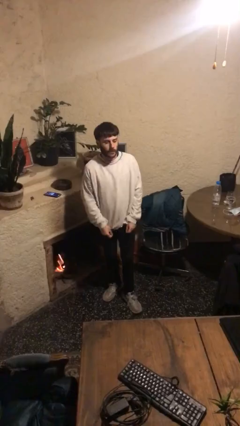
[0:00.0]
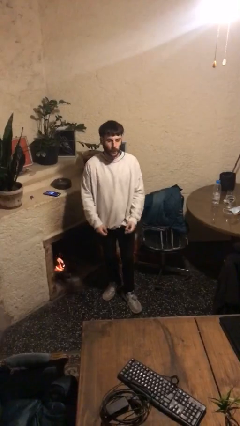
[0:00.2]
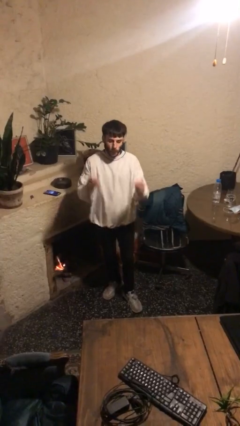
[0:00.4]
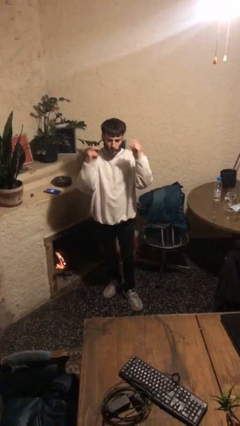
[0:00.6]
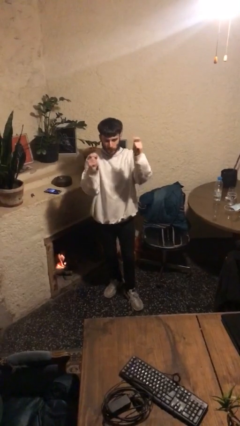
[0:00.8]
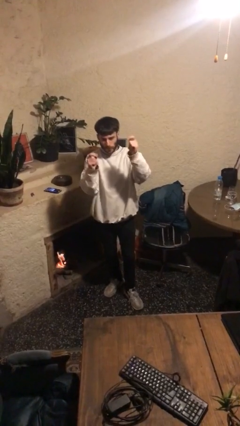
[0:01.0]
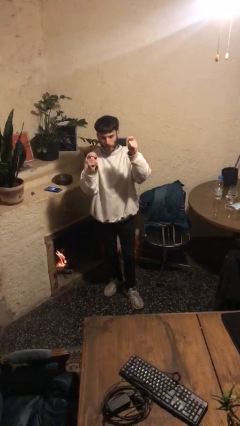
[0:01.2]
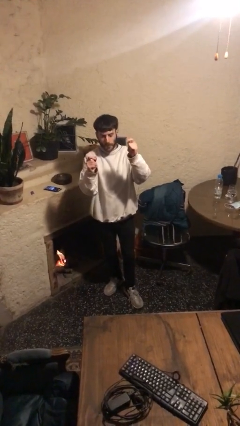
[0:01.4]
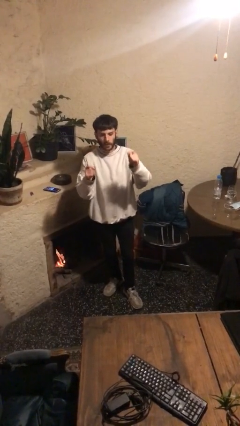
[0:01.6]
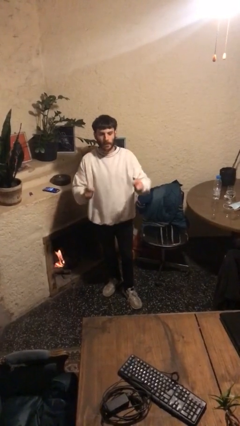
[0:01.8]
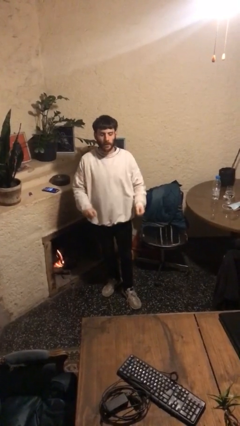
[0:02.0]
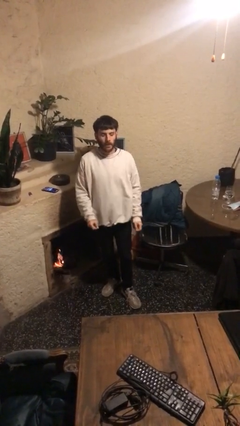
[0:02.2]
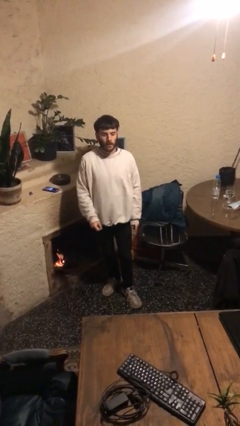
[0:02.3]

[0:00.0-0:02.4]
person snaps fingers

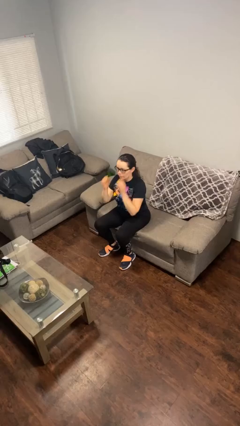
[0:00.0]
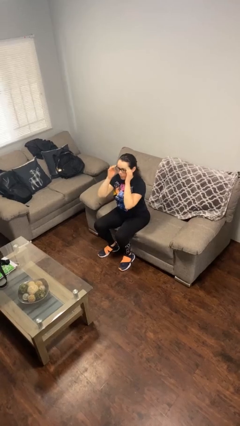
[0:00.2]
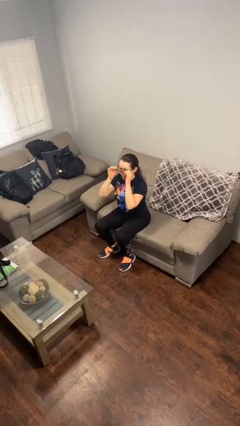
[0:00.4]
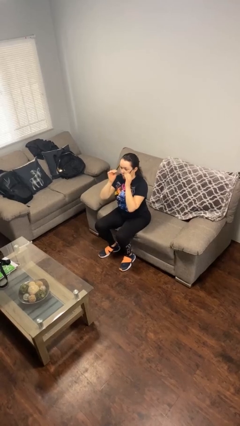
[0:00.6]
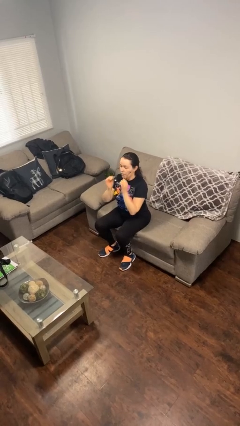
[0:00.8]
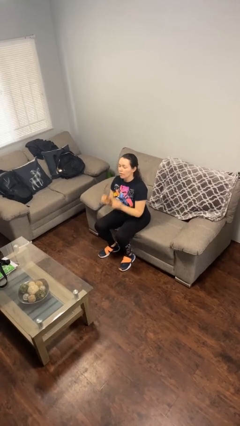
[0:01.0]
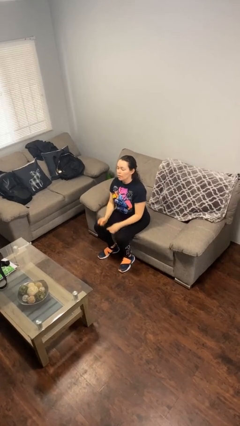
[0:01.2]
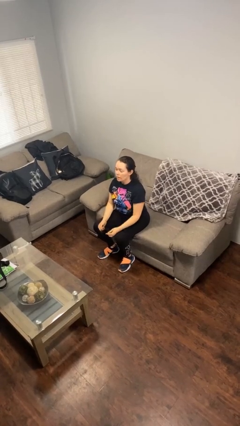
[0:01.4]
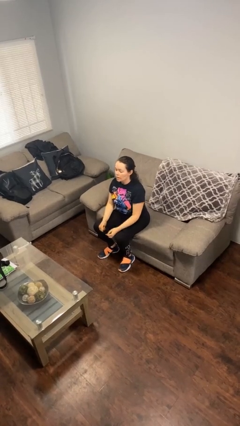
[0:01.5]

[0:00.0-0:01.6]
person takes off glasses

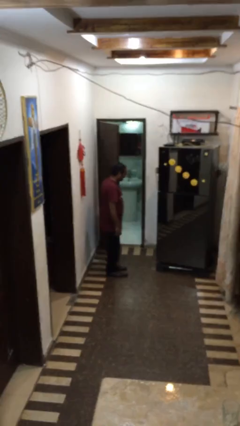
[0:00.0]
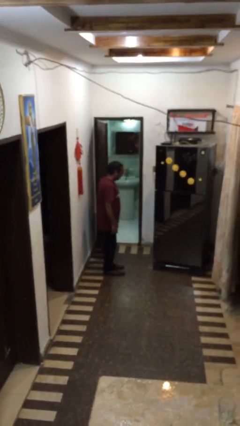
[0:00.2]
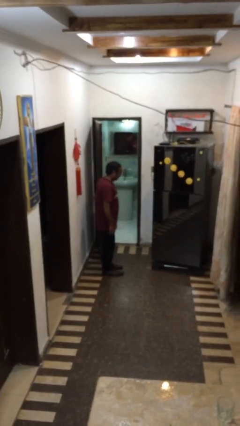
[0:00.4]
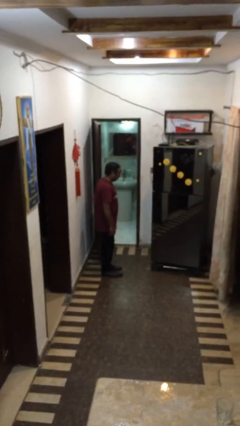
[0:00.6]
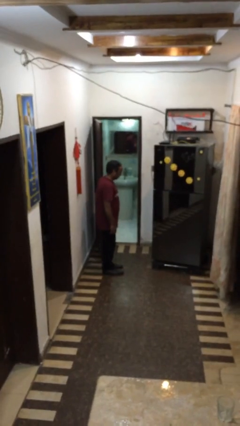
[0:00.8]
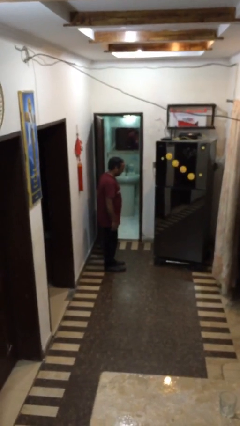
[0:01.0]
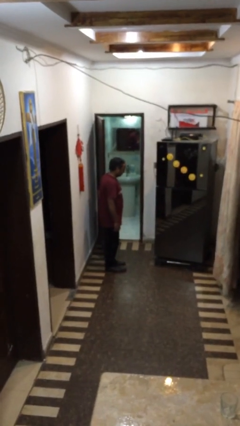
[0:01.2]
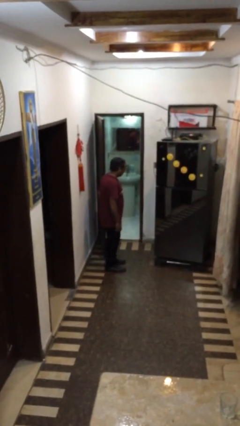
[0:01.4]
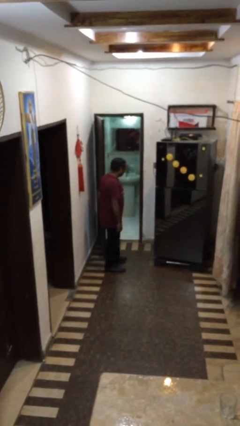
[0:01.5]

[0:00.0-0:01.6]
person opens facility door

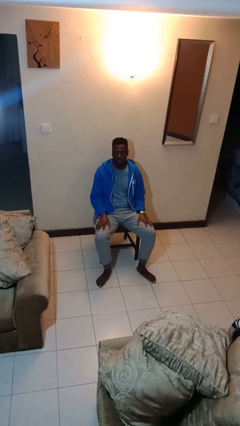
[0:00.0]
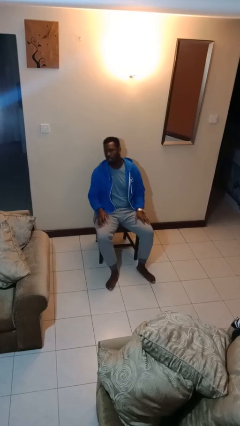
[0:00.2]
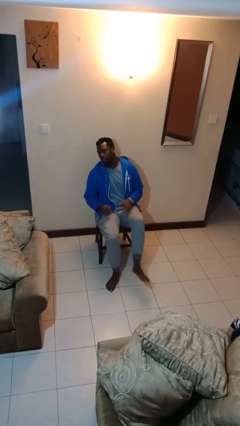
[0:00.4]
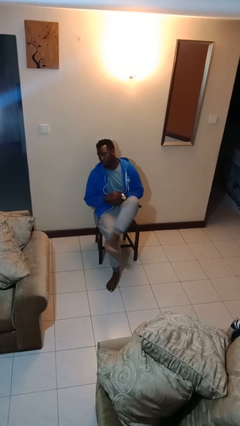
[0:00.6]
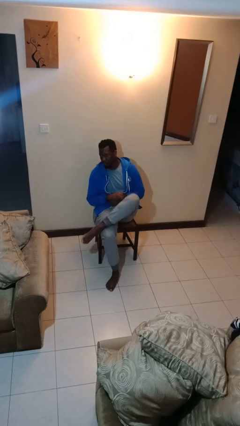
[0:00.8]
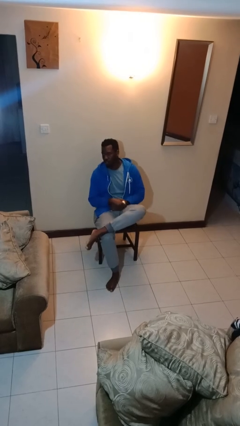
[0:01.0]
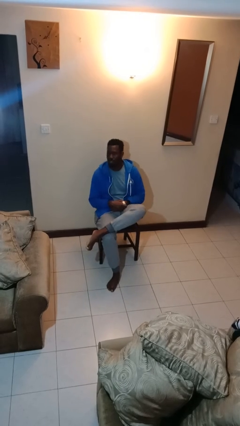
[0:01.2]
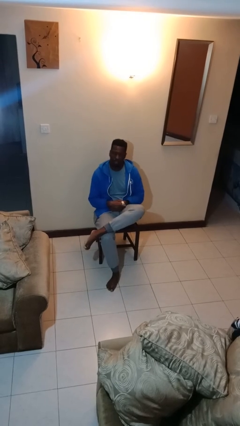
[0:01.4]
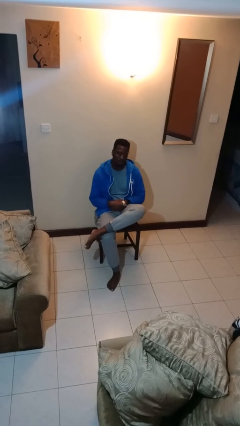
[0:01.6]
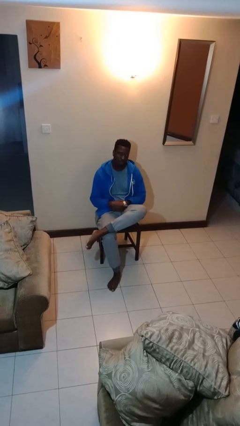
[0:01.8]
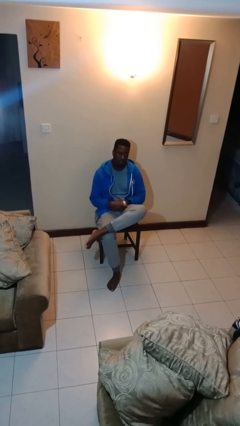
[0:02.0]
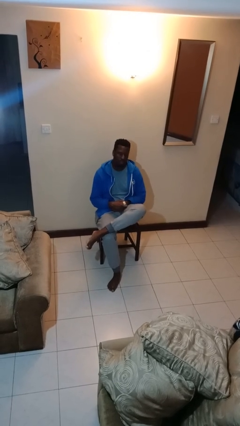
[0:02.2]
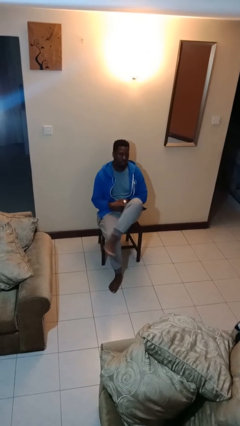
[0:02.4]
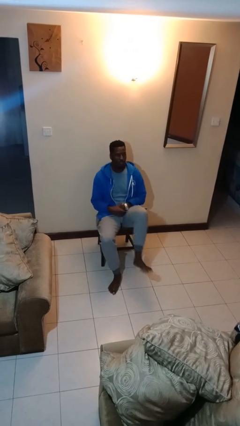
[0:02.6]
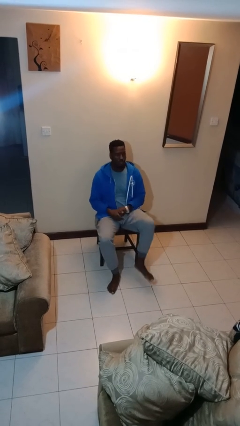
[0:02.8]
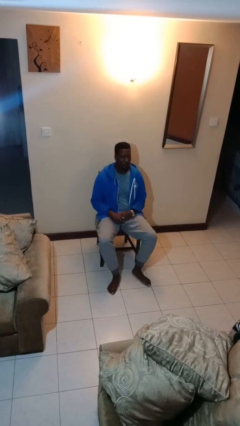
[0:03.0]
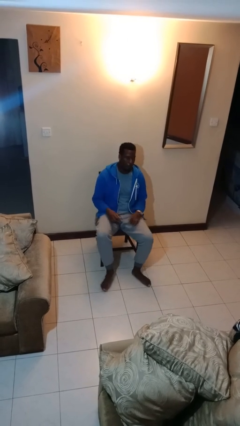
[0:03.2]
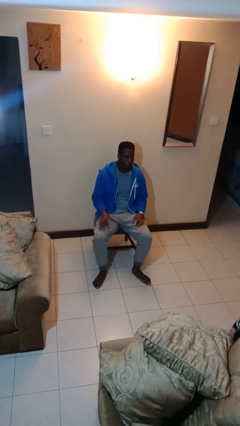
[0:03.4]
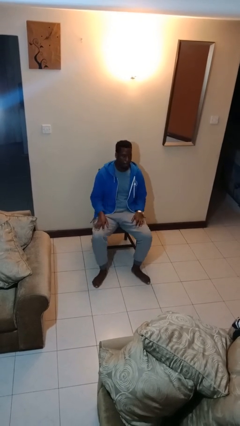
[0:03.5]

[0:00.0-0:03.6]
person crosses legs

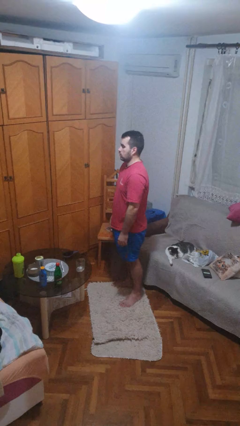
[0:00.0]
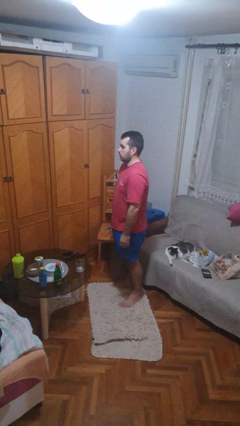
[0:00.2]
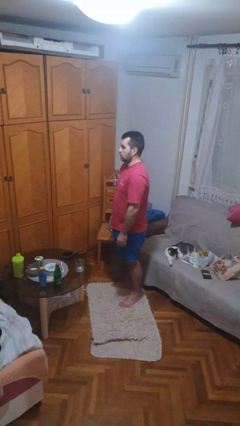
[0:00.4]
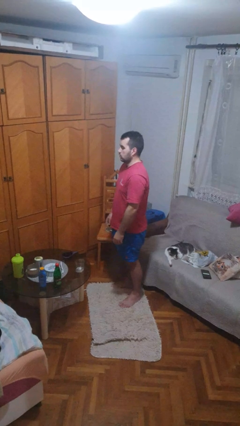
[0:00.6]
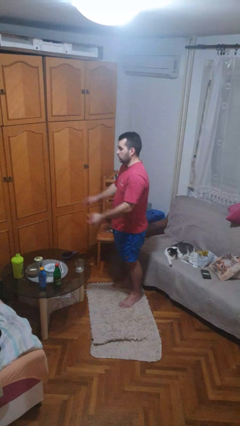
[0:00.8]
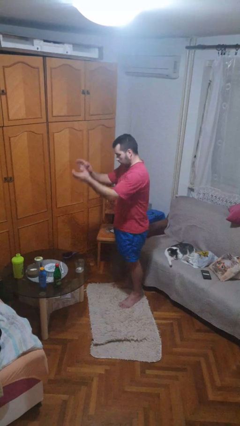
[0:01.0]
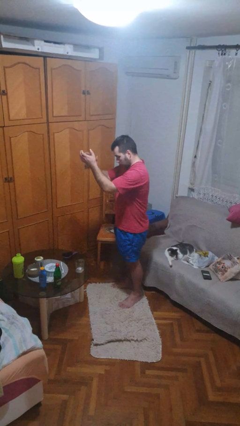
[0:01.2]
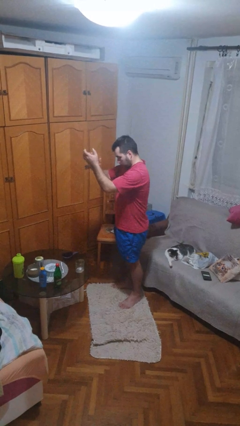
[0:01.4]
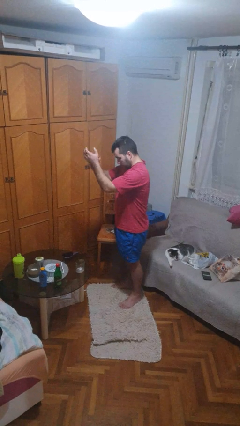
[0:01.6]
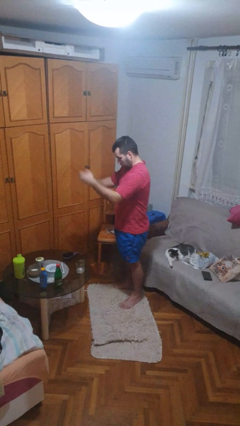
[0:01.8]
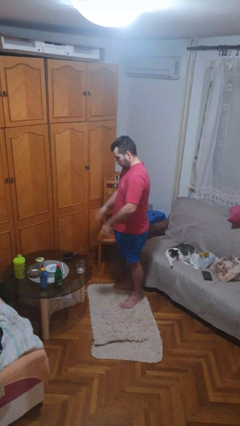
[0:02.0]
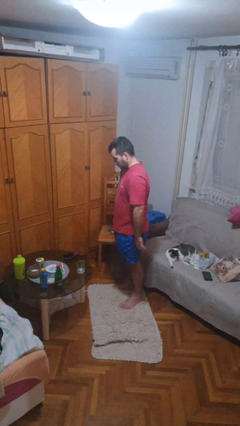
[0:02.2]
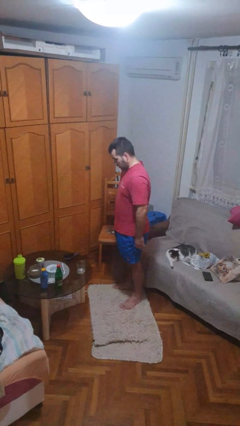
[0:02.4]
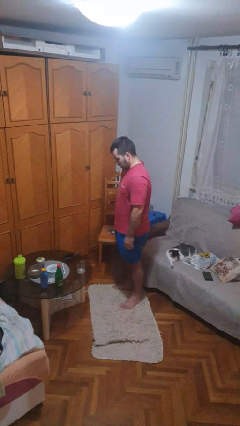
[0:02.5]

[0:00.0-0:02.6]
person claps hands

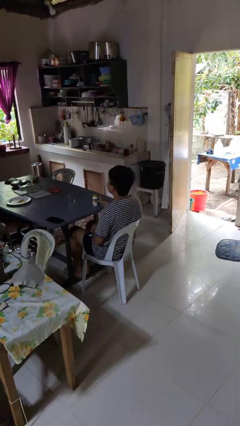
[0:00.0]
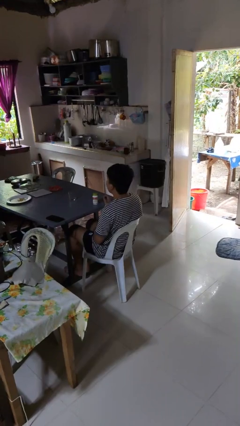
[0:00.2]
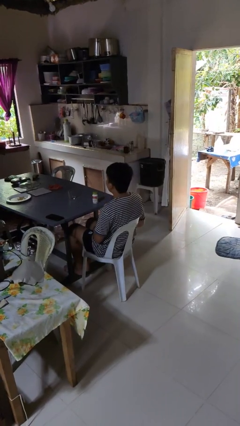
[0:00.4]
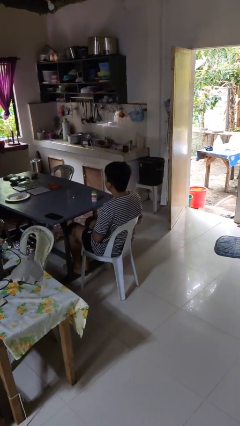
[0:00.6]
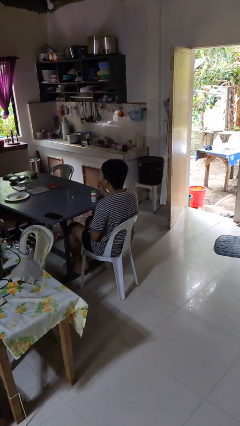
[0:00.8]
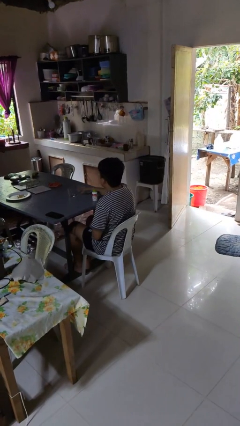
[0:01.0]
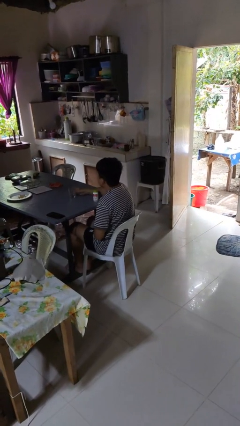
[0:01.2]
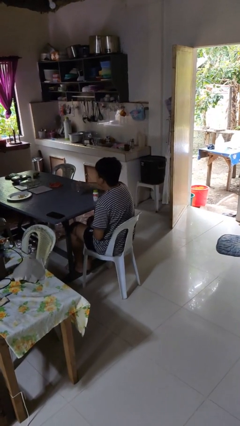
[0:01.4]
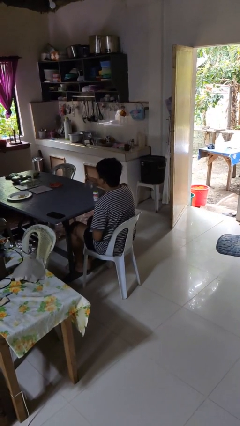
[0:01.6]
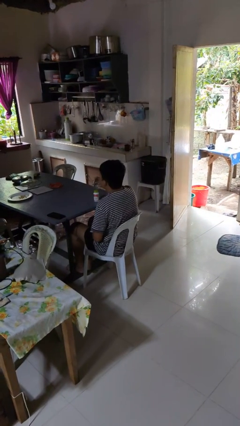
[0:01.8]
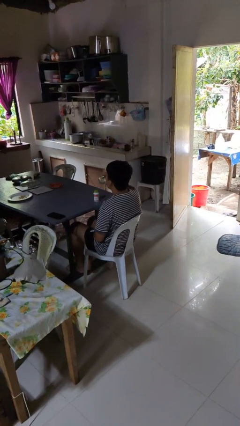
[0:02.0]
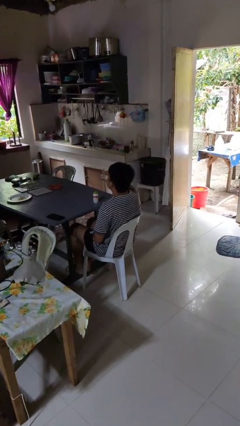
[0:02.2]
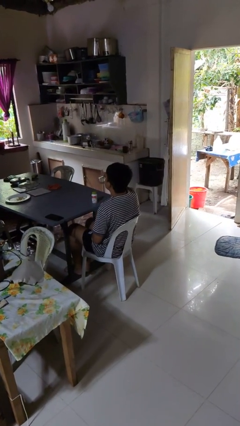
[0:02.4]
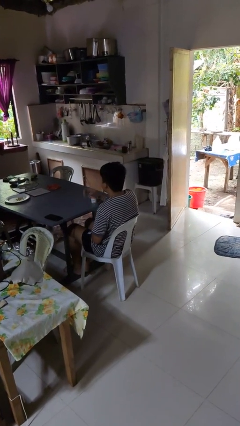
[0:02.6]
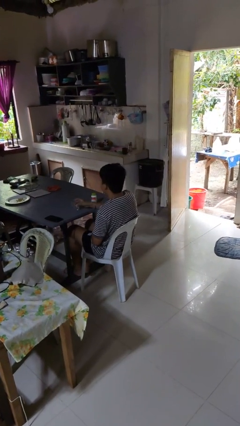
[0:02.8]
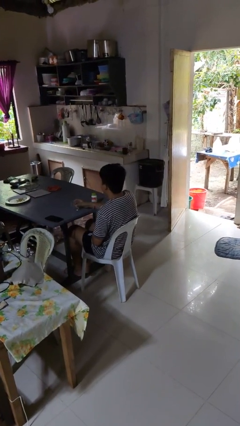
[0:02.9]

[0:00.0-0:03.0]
person drinks from cup

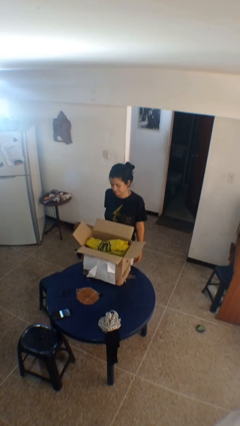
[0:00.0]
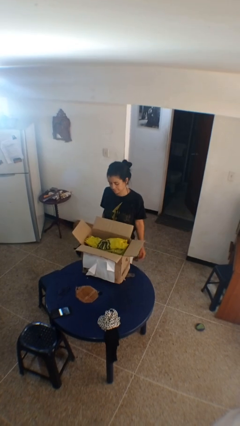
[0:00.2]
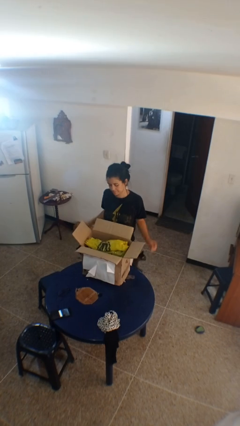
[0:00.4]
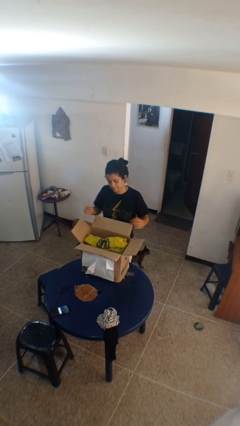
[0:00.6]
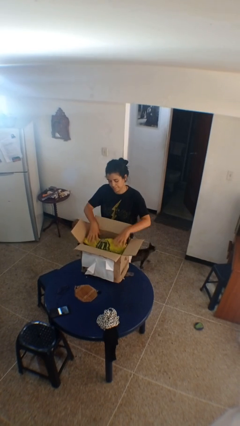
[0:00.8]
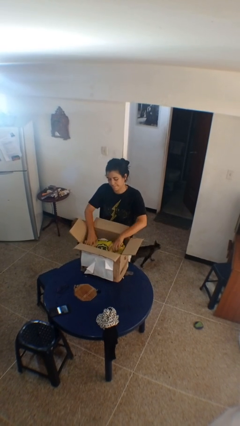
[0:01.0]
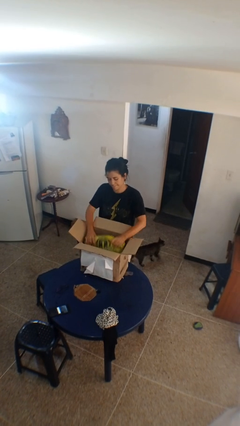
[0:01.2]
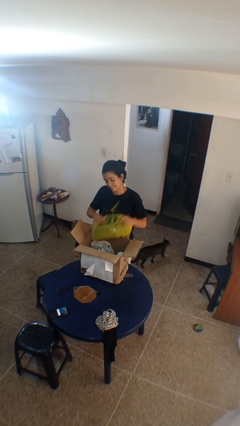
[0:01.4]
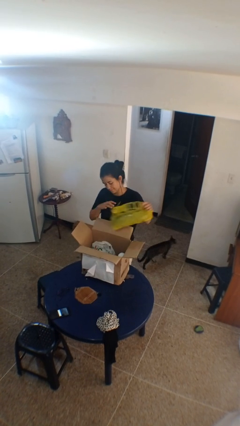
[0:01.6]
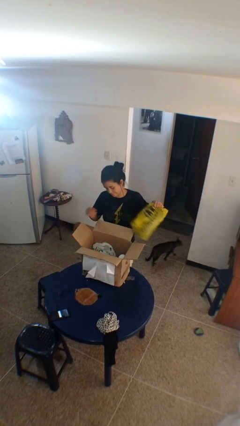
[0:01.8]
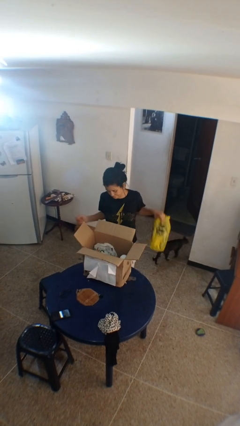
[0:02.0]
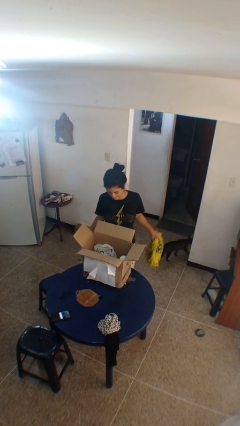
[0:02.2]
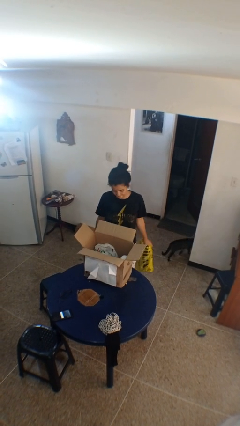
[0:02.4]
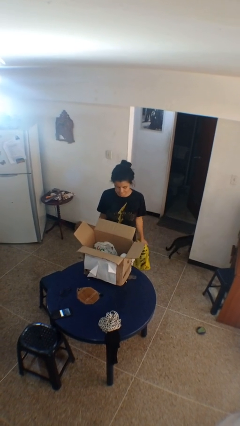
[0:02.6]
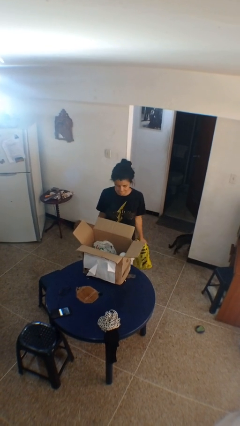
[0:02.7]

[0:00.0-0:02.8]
person takes object from box
